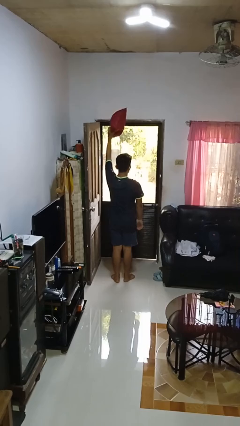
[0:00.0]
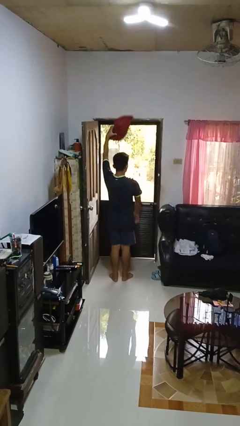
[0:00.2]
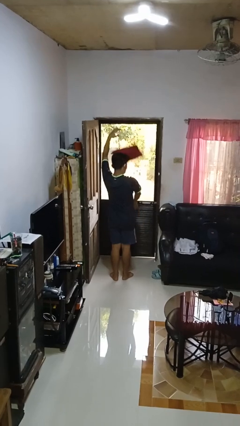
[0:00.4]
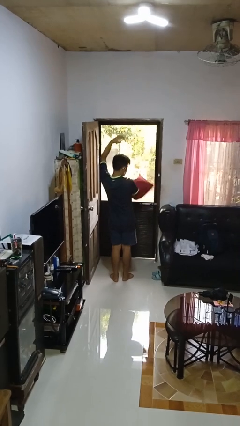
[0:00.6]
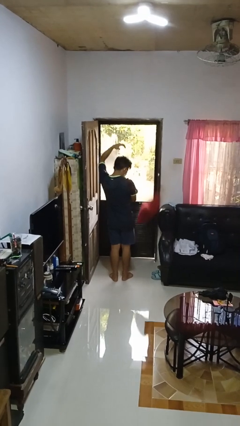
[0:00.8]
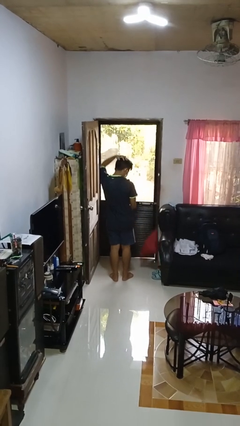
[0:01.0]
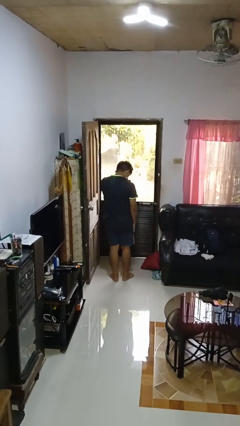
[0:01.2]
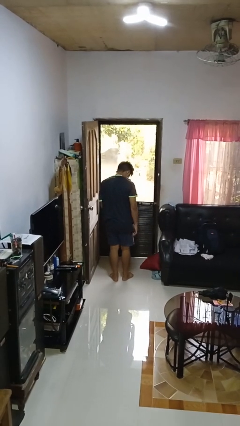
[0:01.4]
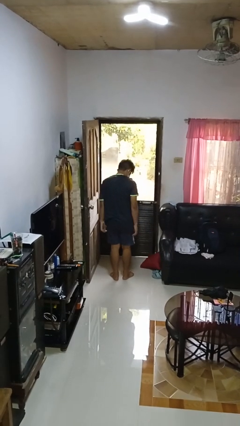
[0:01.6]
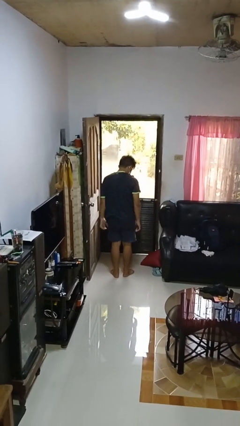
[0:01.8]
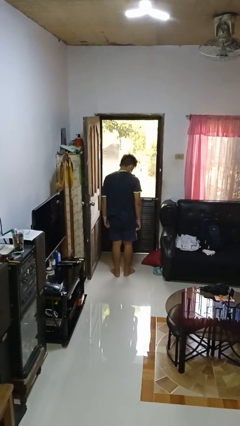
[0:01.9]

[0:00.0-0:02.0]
person drops object

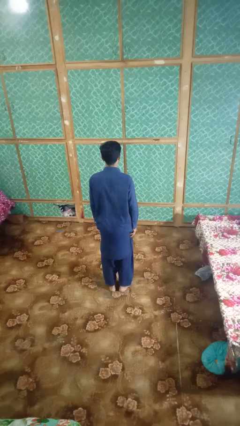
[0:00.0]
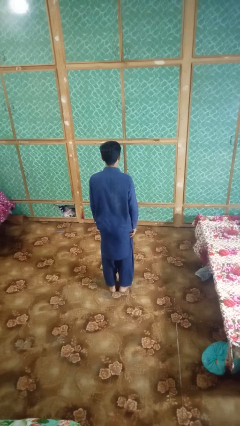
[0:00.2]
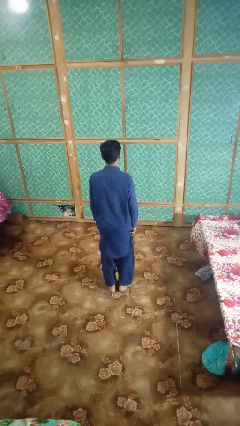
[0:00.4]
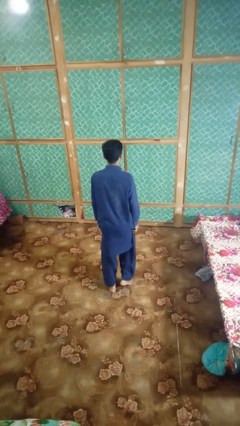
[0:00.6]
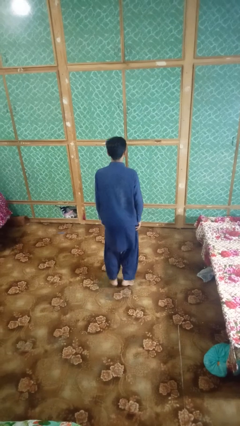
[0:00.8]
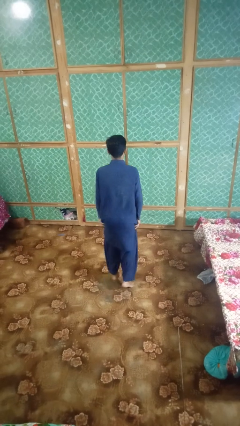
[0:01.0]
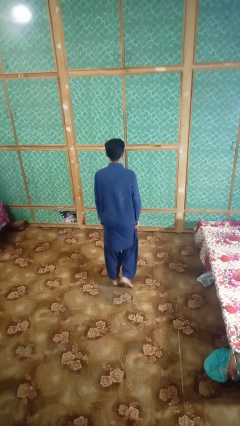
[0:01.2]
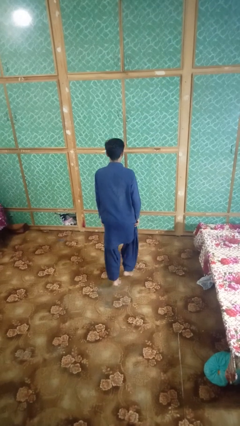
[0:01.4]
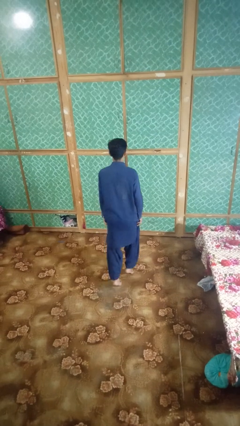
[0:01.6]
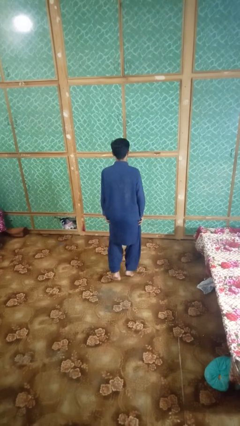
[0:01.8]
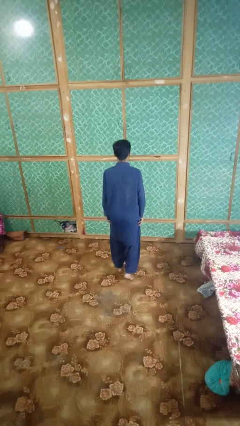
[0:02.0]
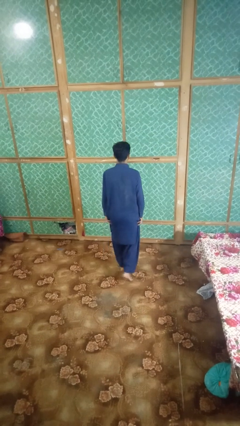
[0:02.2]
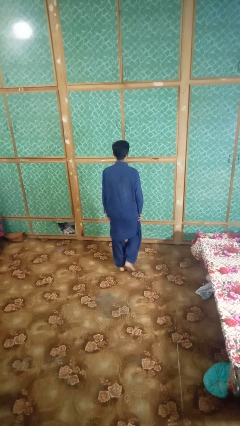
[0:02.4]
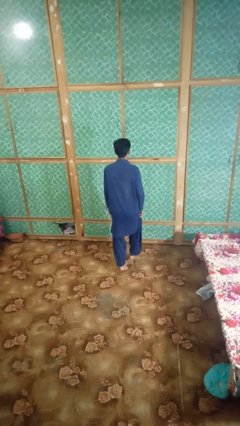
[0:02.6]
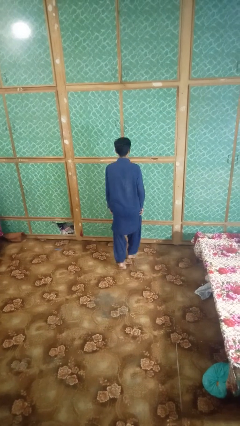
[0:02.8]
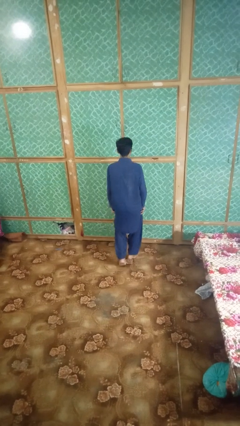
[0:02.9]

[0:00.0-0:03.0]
person walks tiptoe

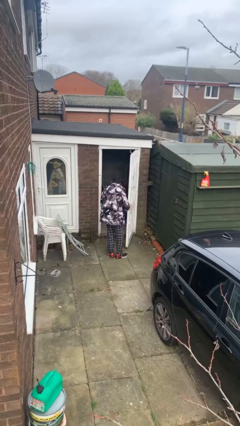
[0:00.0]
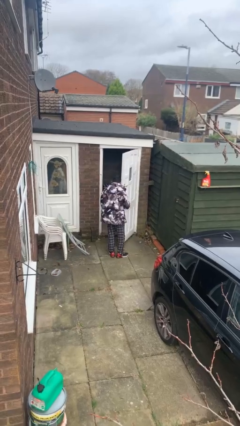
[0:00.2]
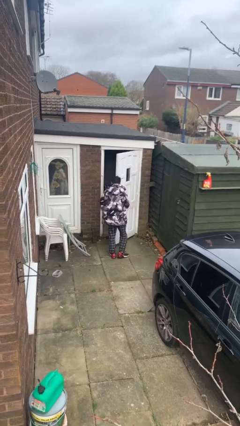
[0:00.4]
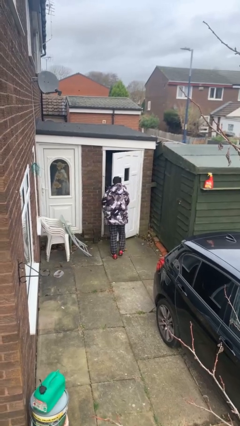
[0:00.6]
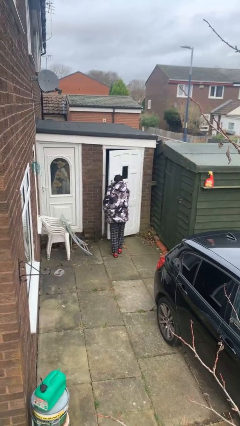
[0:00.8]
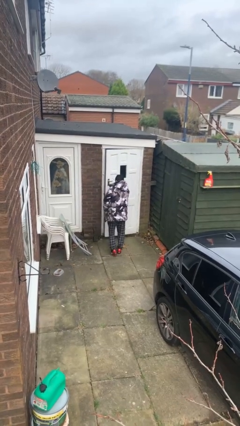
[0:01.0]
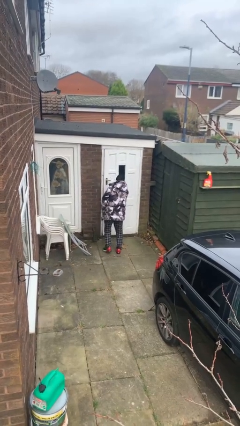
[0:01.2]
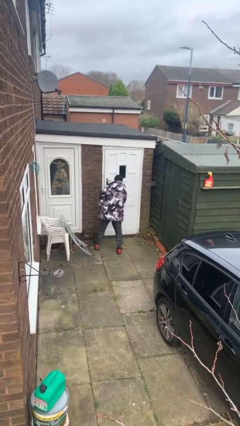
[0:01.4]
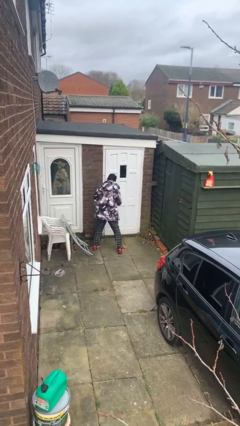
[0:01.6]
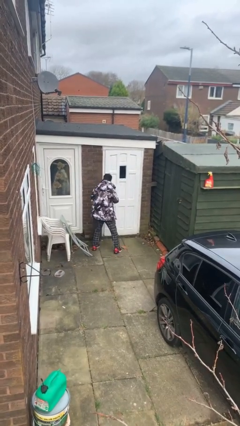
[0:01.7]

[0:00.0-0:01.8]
person closes facility door

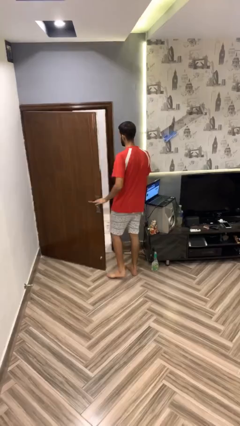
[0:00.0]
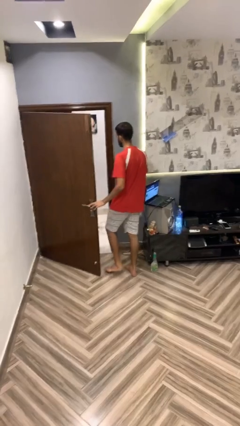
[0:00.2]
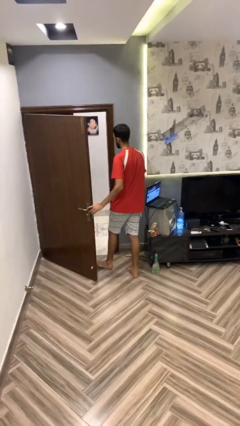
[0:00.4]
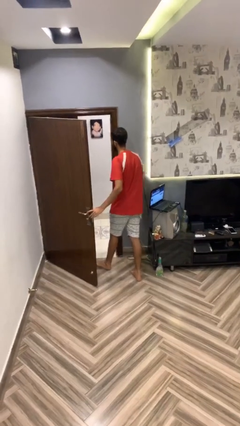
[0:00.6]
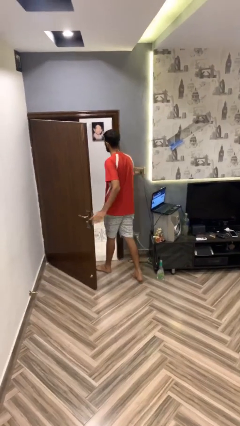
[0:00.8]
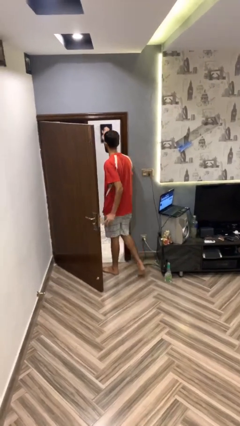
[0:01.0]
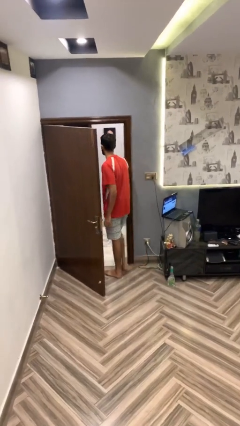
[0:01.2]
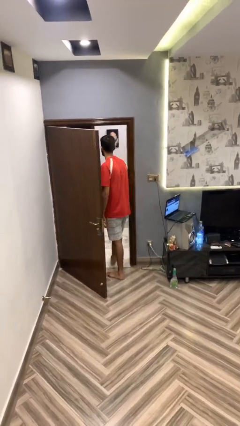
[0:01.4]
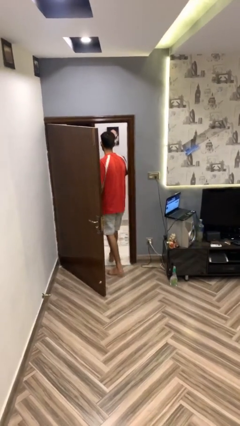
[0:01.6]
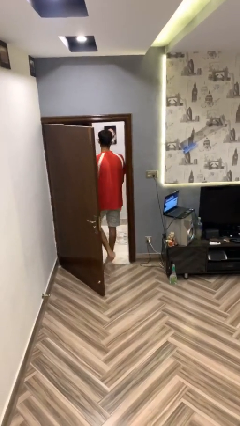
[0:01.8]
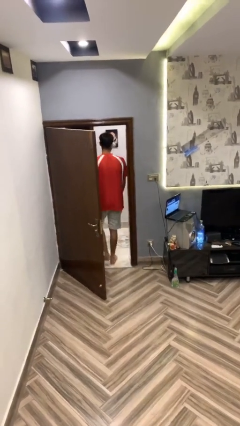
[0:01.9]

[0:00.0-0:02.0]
person exits scene through structure

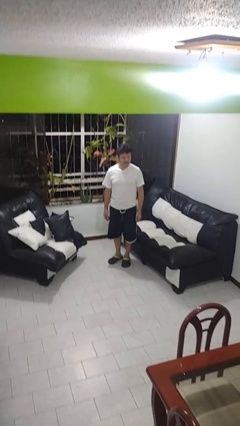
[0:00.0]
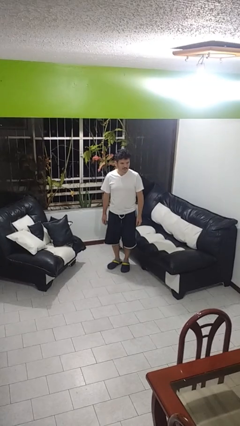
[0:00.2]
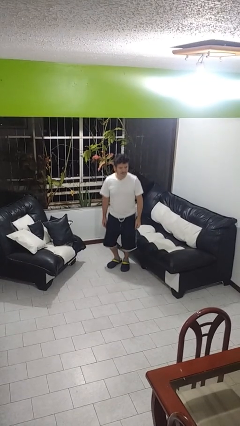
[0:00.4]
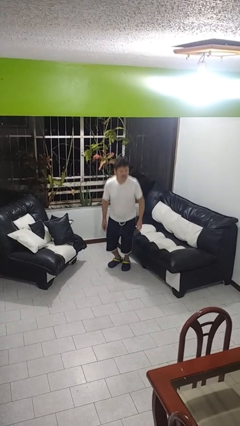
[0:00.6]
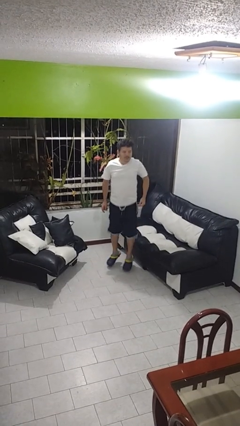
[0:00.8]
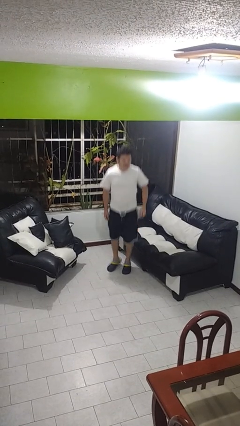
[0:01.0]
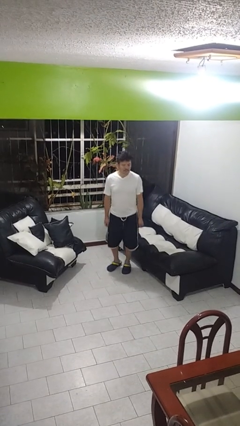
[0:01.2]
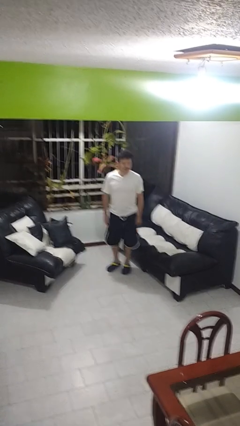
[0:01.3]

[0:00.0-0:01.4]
person jumps

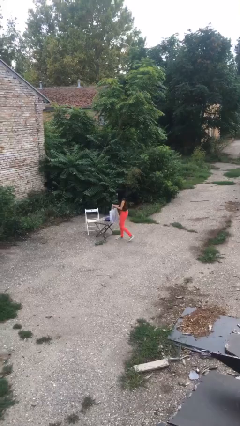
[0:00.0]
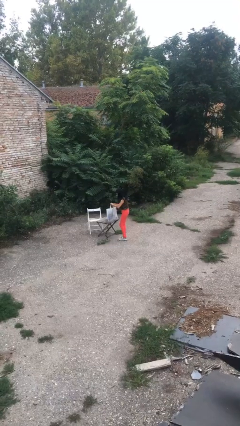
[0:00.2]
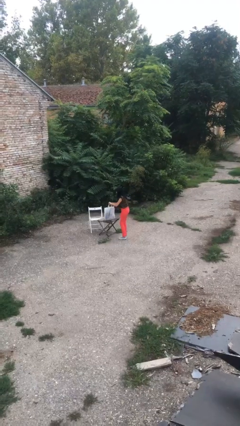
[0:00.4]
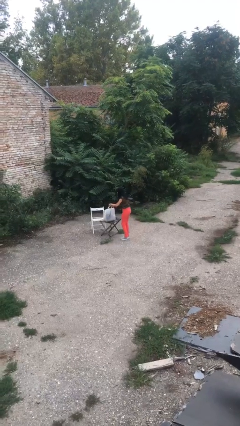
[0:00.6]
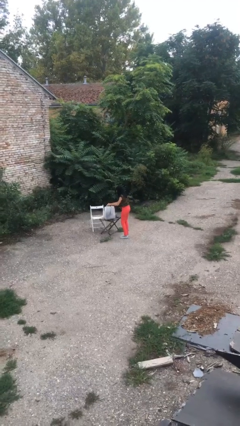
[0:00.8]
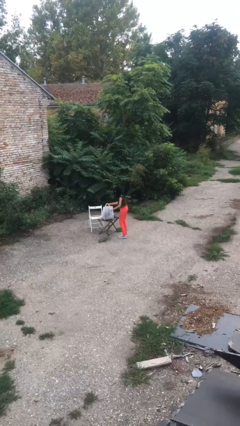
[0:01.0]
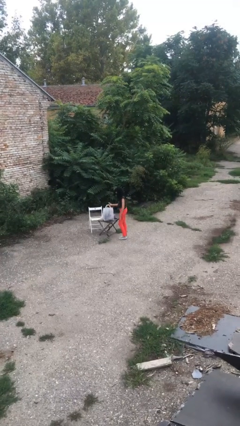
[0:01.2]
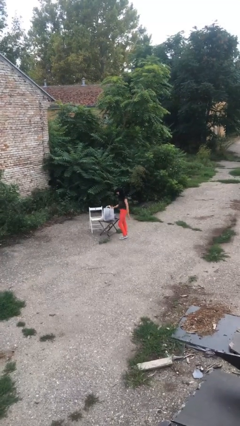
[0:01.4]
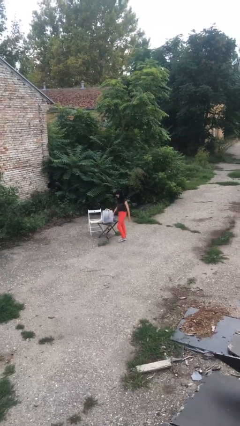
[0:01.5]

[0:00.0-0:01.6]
person puts down object on table

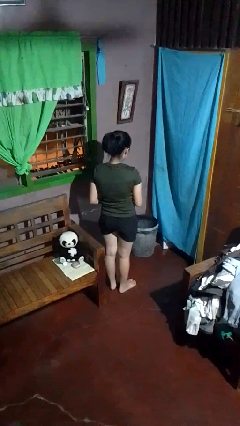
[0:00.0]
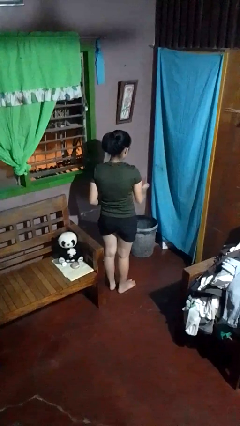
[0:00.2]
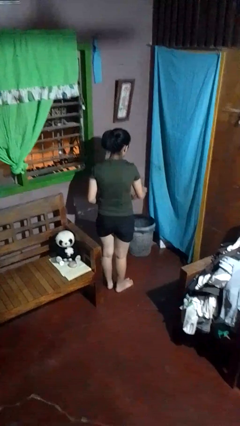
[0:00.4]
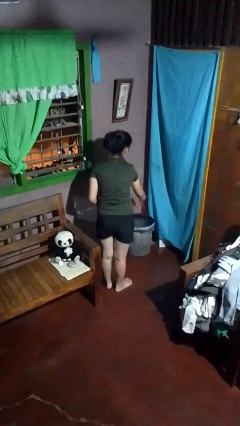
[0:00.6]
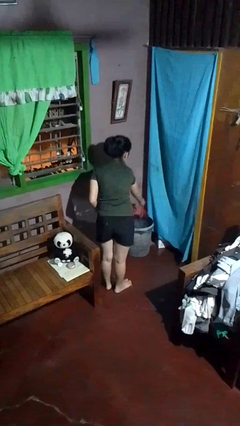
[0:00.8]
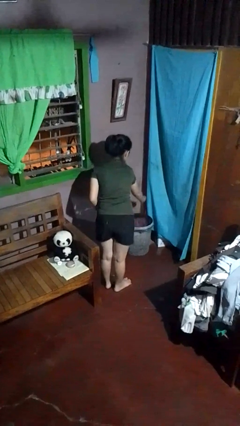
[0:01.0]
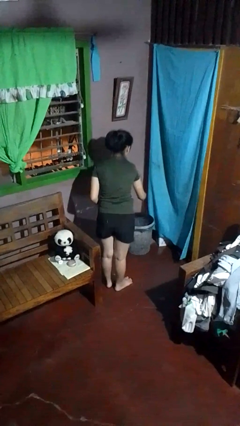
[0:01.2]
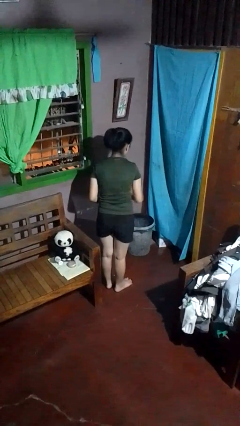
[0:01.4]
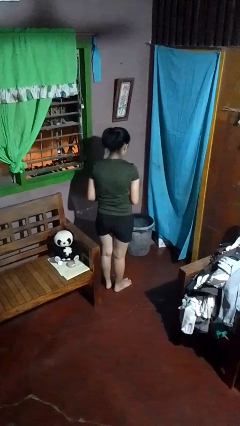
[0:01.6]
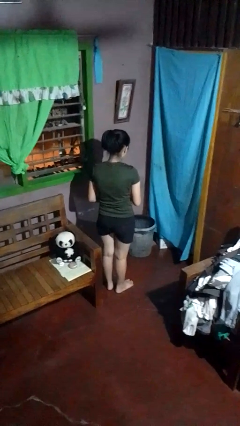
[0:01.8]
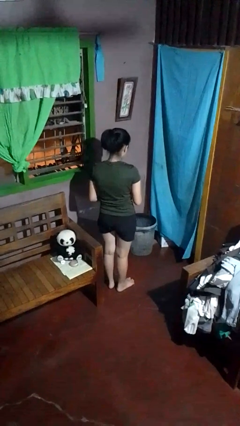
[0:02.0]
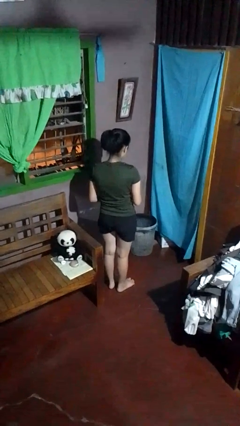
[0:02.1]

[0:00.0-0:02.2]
person discards trash

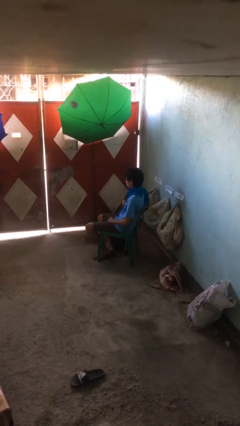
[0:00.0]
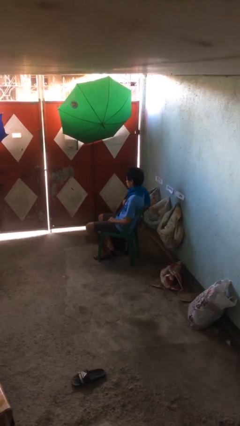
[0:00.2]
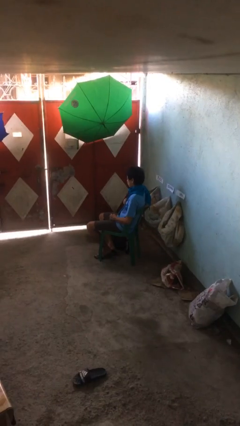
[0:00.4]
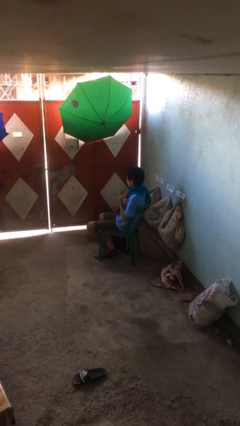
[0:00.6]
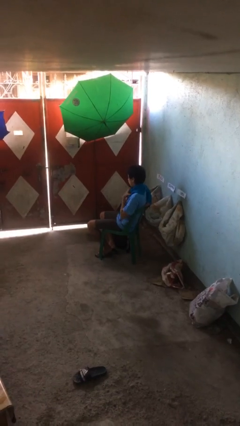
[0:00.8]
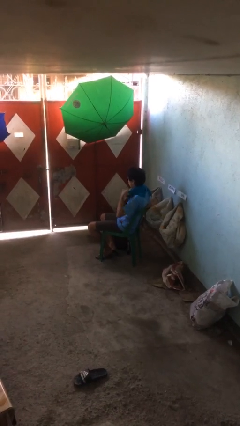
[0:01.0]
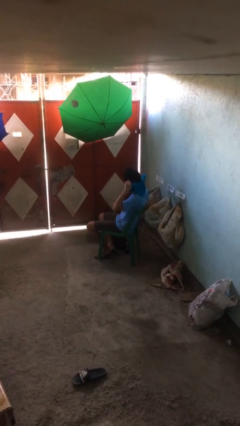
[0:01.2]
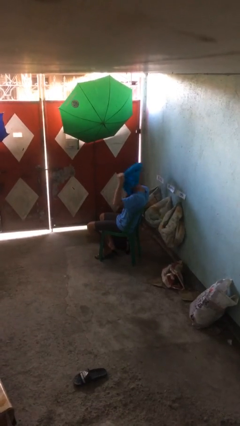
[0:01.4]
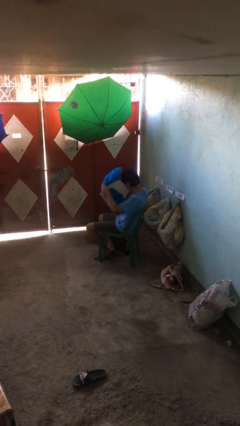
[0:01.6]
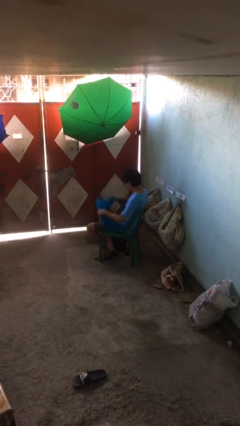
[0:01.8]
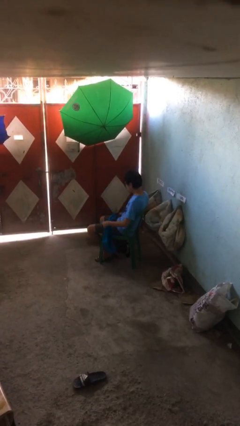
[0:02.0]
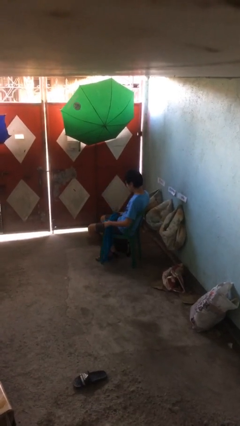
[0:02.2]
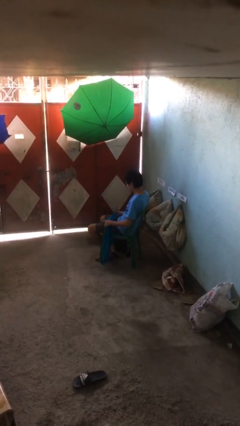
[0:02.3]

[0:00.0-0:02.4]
person takes off scarf

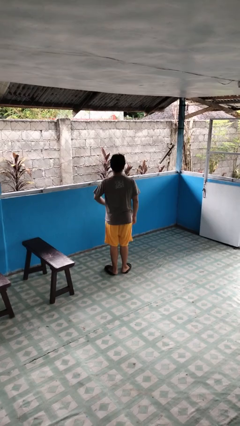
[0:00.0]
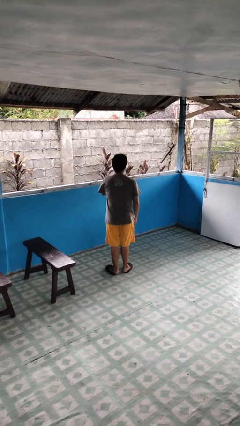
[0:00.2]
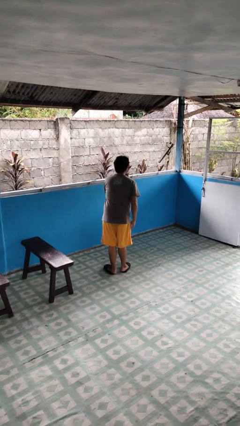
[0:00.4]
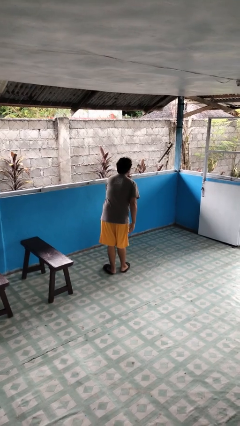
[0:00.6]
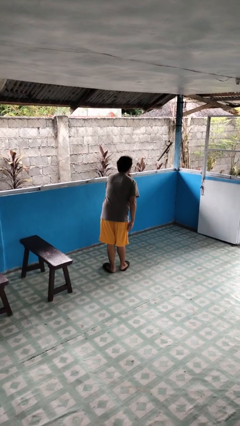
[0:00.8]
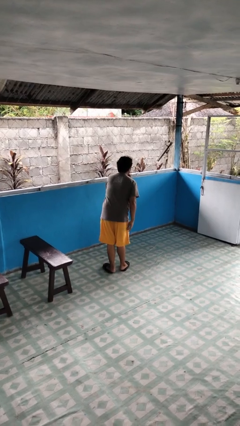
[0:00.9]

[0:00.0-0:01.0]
person gestures be quiet
